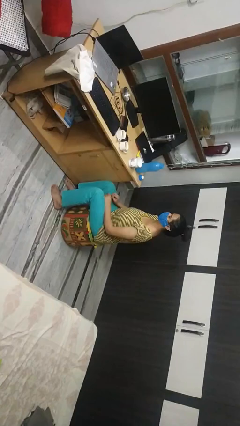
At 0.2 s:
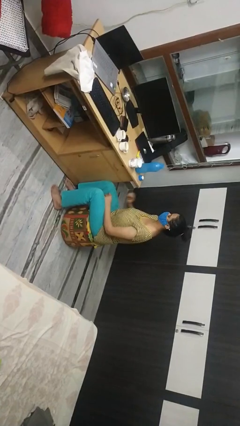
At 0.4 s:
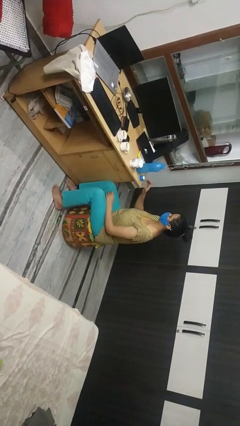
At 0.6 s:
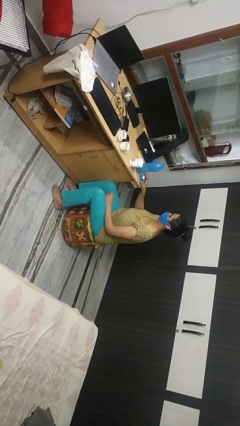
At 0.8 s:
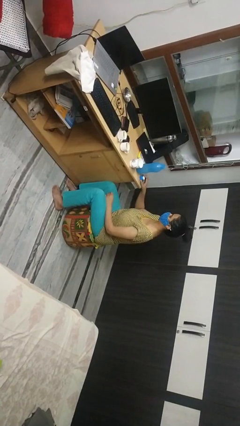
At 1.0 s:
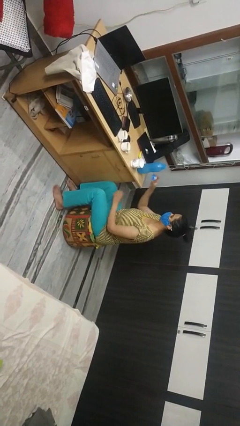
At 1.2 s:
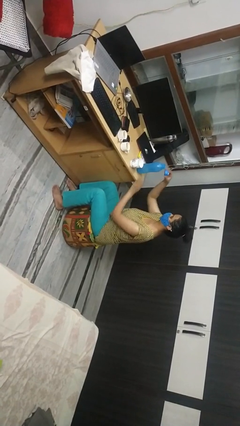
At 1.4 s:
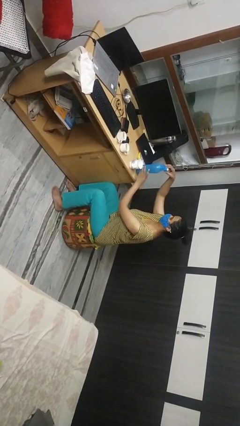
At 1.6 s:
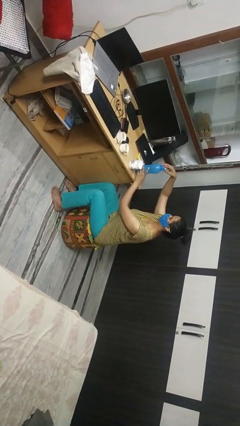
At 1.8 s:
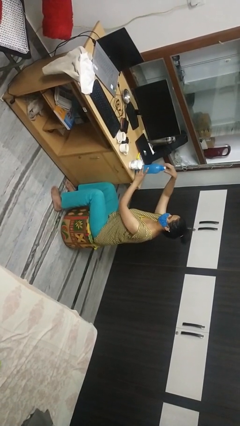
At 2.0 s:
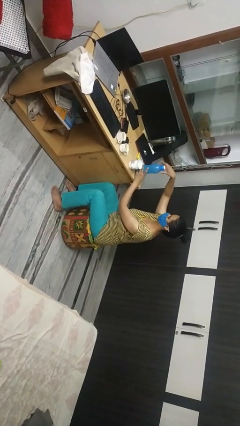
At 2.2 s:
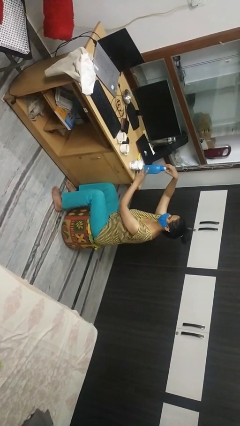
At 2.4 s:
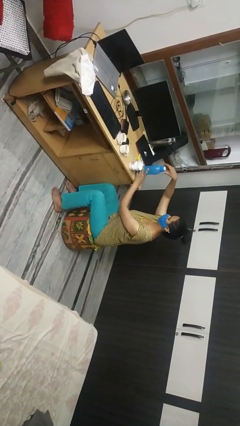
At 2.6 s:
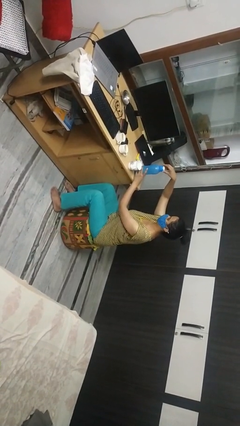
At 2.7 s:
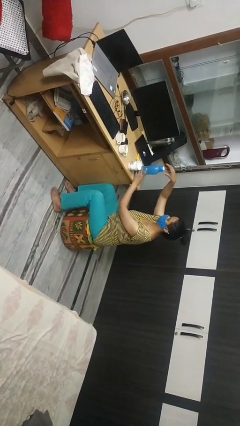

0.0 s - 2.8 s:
person screws lid to bottle

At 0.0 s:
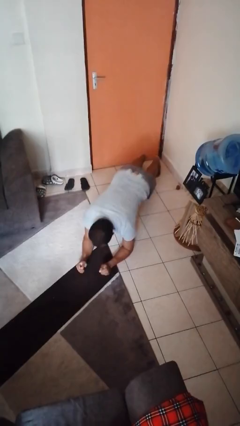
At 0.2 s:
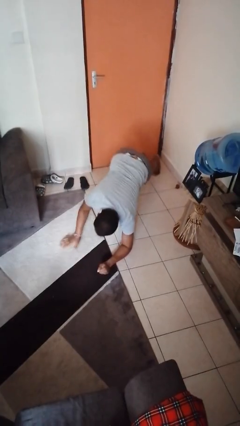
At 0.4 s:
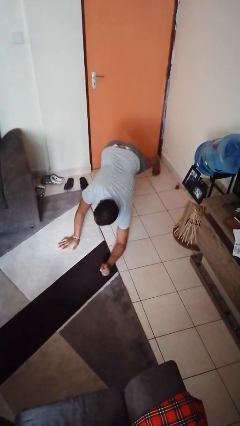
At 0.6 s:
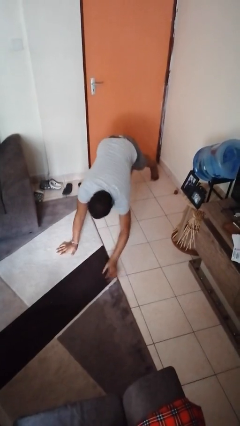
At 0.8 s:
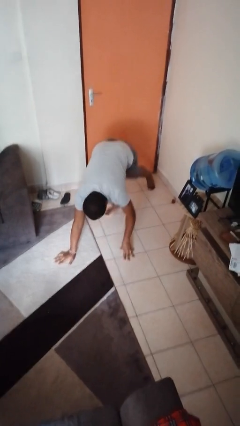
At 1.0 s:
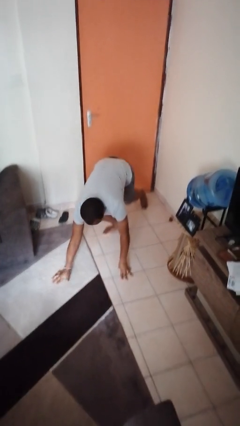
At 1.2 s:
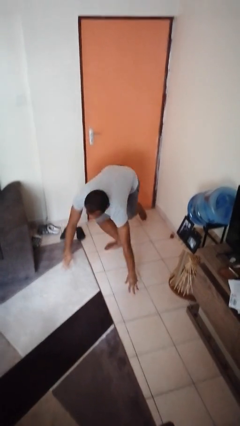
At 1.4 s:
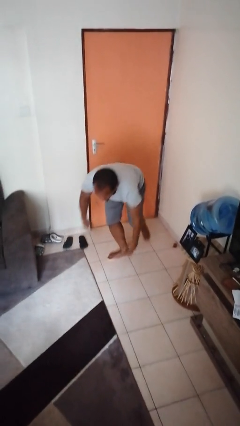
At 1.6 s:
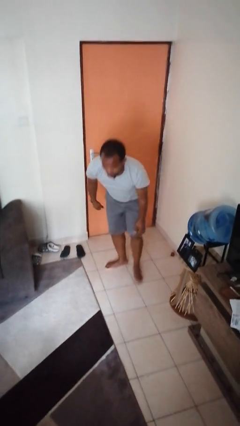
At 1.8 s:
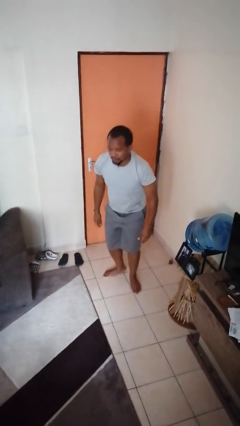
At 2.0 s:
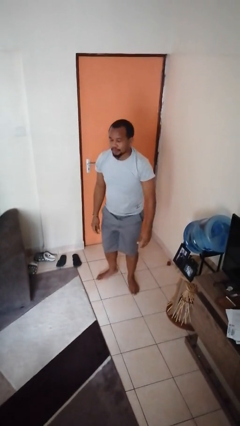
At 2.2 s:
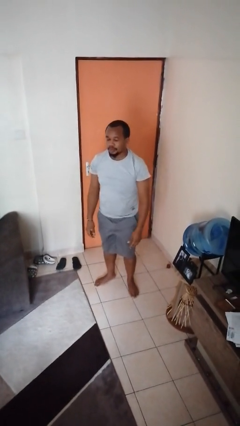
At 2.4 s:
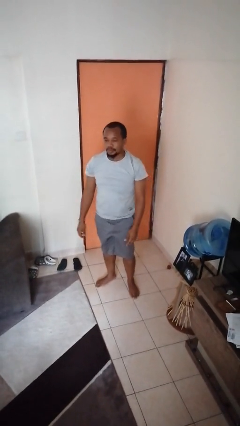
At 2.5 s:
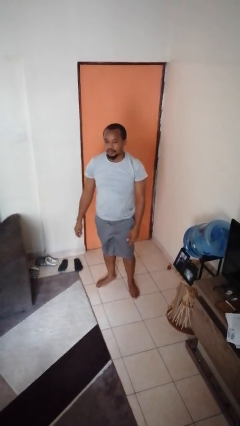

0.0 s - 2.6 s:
person stands up from floor

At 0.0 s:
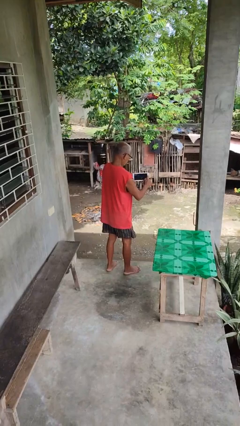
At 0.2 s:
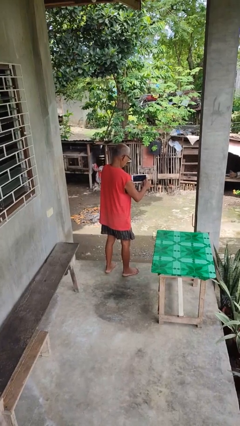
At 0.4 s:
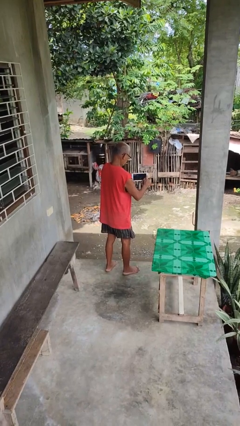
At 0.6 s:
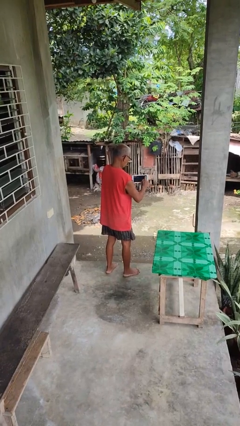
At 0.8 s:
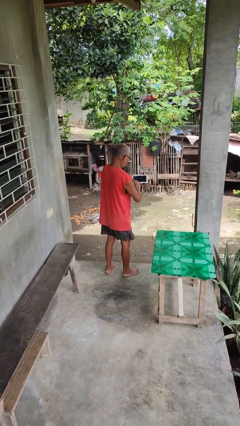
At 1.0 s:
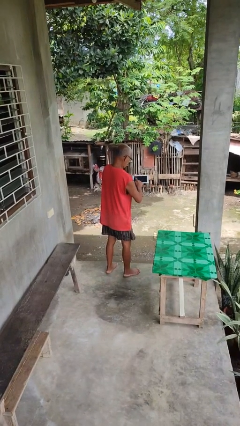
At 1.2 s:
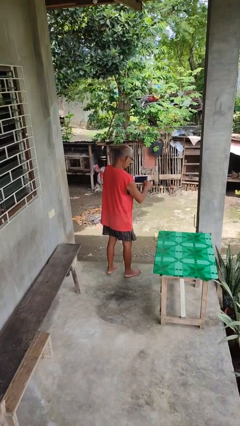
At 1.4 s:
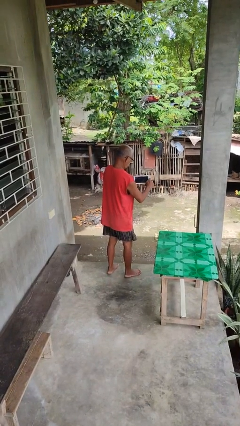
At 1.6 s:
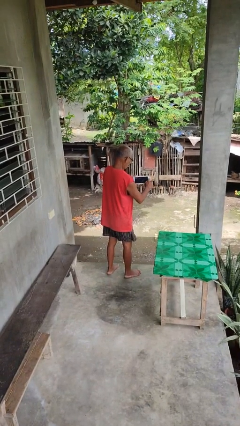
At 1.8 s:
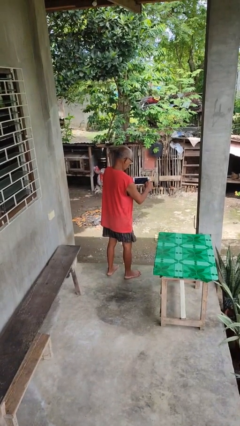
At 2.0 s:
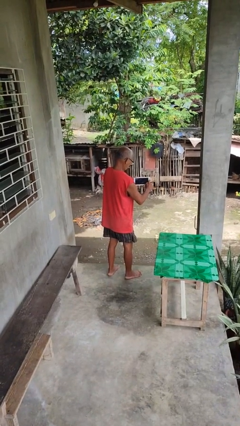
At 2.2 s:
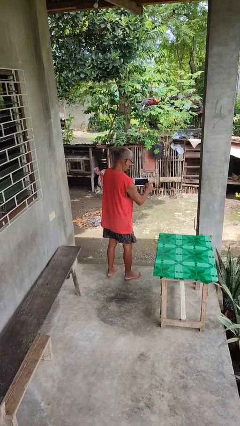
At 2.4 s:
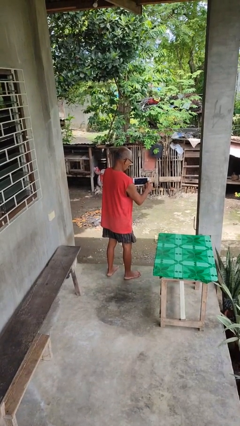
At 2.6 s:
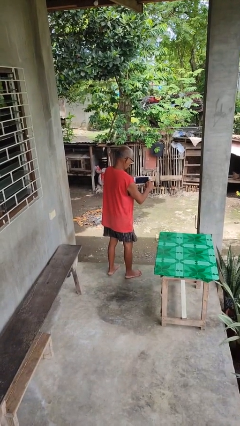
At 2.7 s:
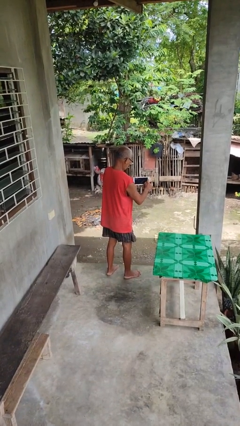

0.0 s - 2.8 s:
person interacts with tablet

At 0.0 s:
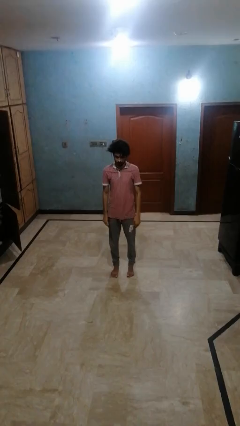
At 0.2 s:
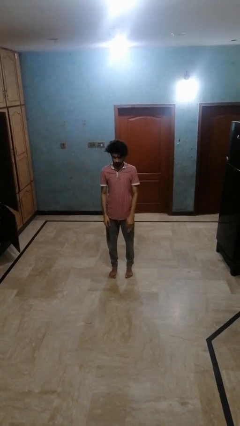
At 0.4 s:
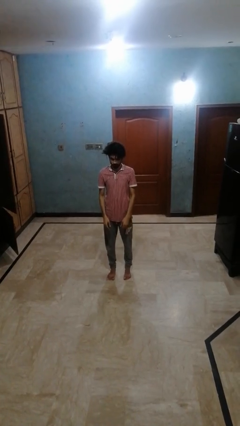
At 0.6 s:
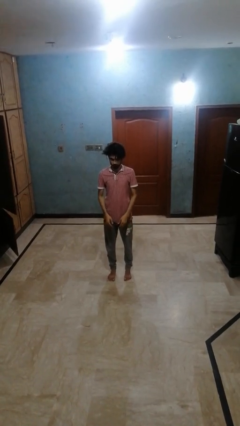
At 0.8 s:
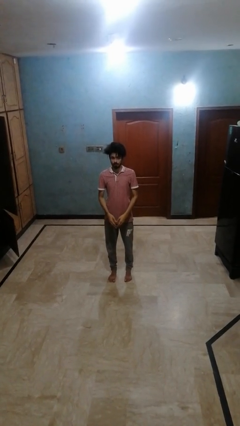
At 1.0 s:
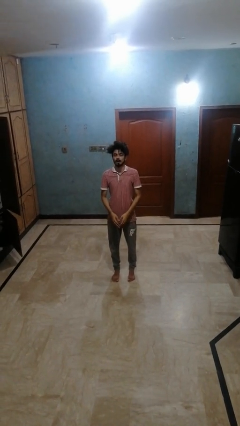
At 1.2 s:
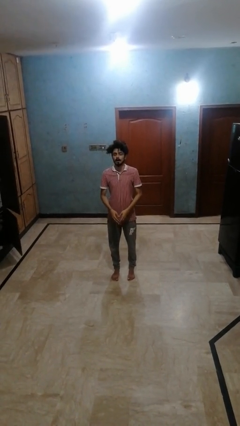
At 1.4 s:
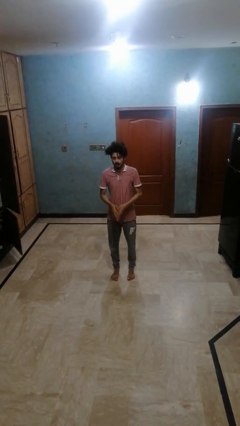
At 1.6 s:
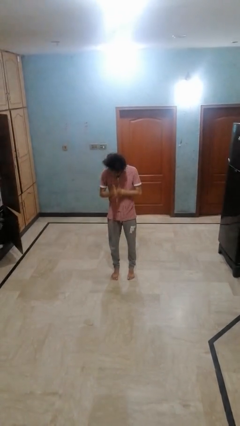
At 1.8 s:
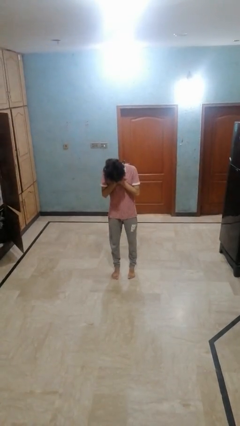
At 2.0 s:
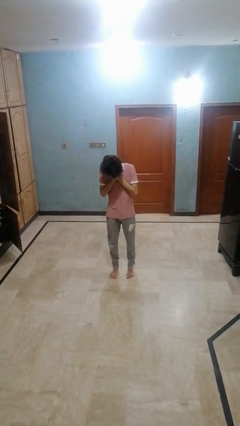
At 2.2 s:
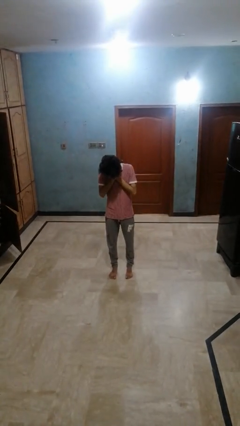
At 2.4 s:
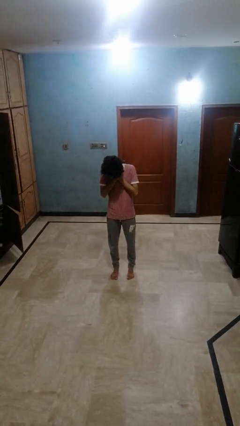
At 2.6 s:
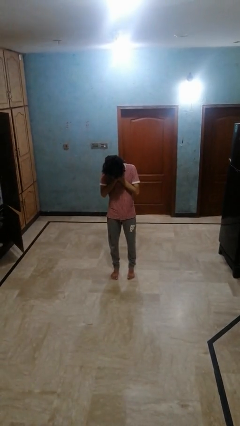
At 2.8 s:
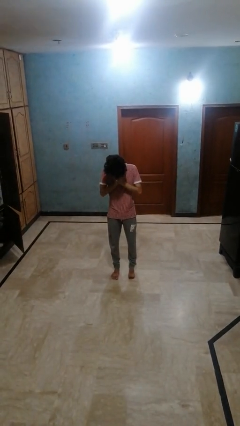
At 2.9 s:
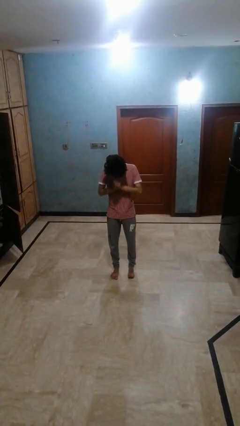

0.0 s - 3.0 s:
person sneezes into hand

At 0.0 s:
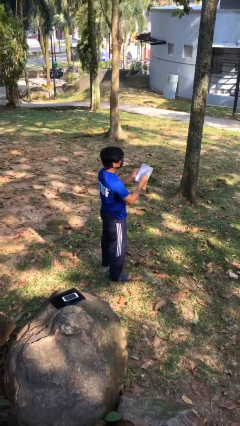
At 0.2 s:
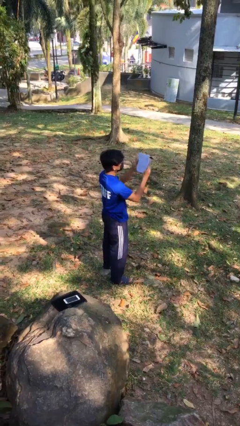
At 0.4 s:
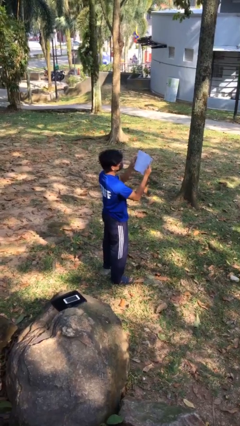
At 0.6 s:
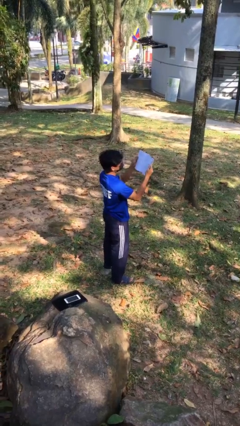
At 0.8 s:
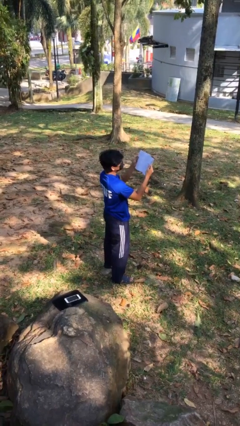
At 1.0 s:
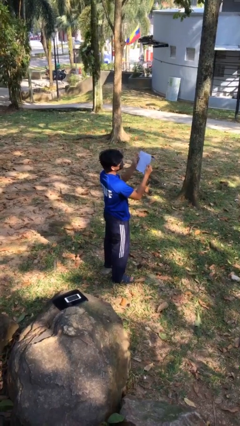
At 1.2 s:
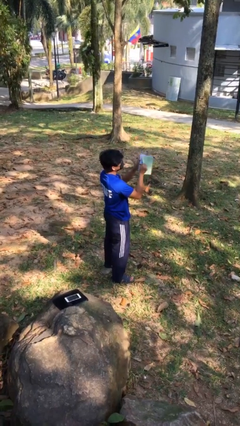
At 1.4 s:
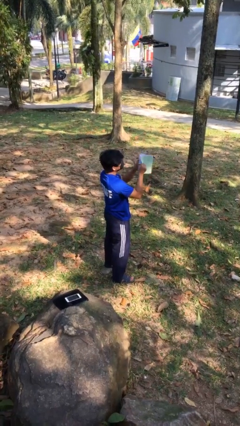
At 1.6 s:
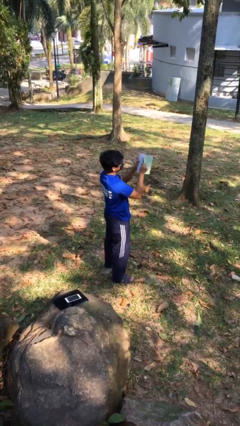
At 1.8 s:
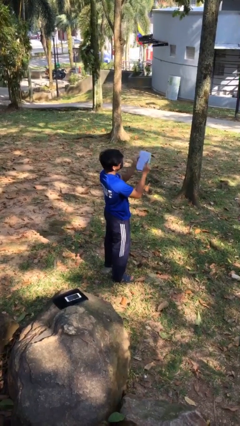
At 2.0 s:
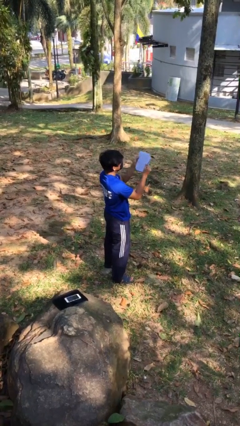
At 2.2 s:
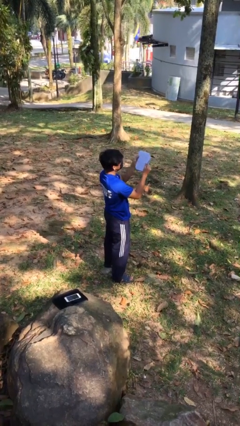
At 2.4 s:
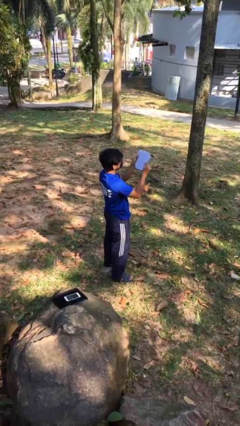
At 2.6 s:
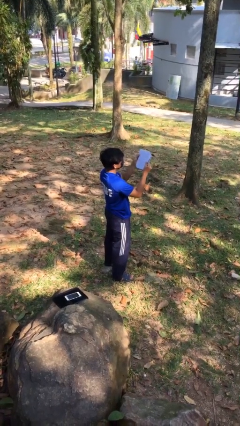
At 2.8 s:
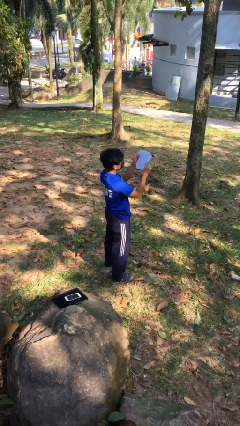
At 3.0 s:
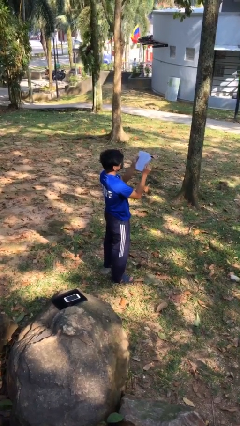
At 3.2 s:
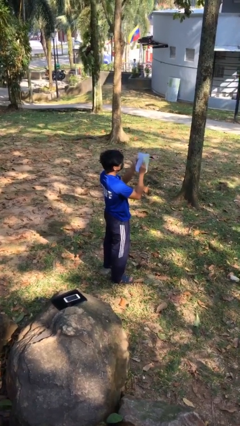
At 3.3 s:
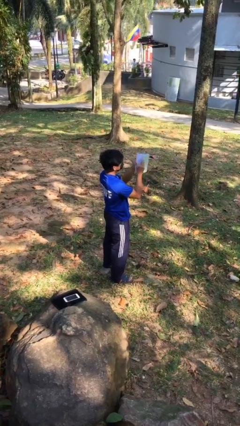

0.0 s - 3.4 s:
person reads document

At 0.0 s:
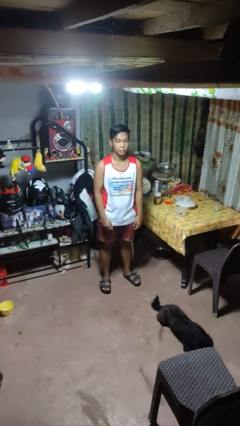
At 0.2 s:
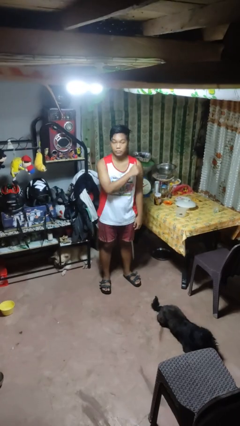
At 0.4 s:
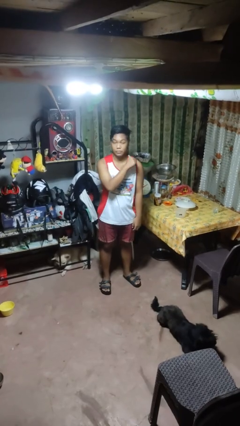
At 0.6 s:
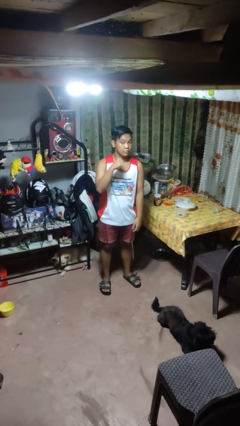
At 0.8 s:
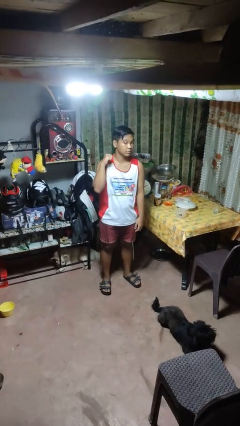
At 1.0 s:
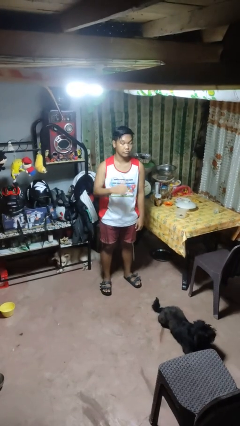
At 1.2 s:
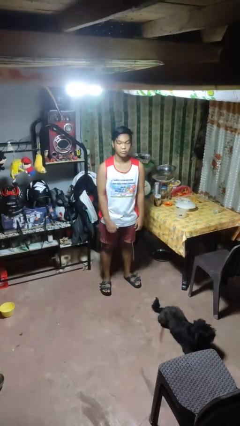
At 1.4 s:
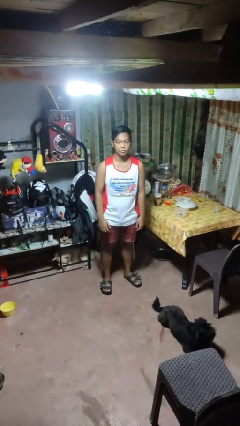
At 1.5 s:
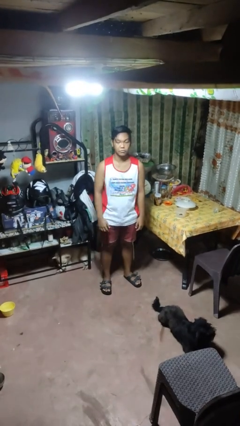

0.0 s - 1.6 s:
person gestures cut

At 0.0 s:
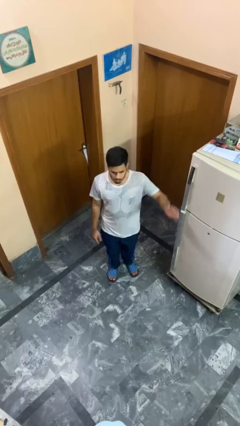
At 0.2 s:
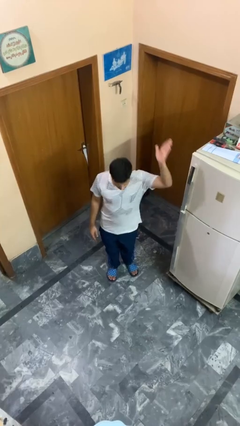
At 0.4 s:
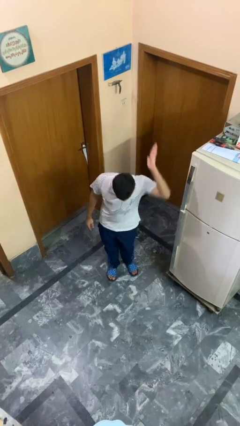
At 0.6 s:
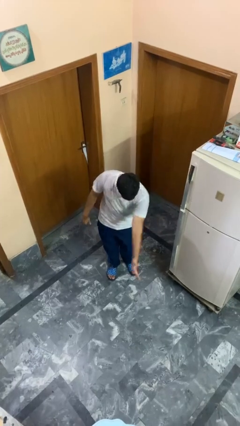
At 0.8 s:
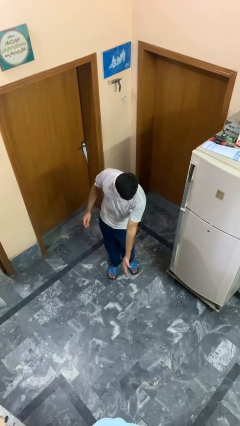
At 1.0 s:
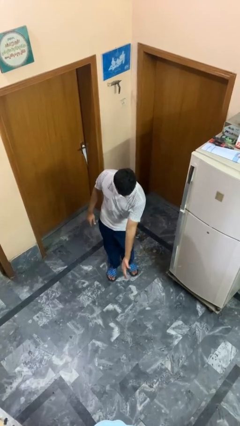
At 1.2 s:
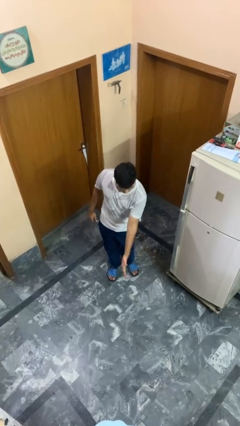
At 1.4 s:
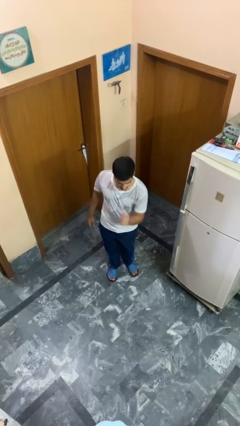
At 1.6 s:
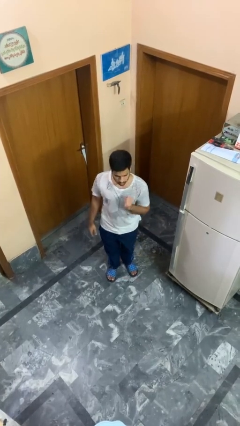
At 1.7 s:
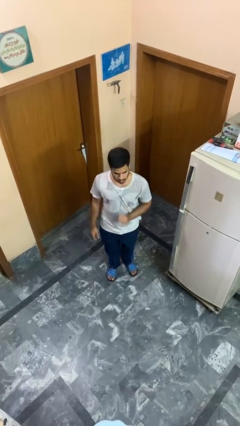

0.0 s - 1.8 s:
person karate chop
